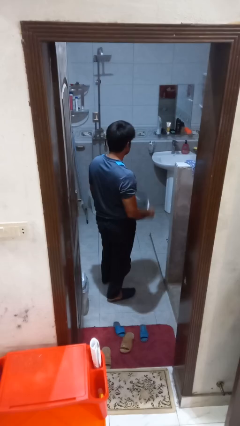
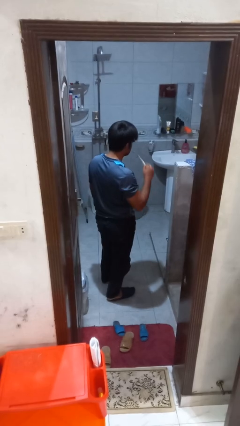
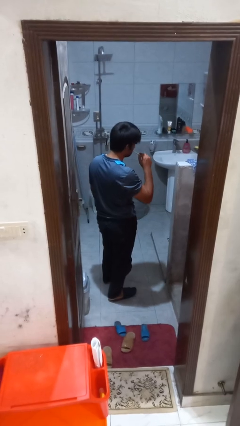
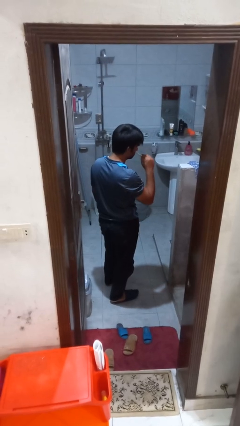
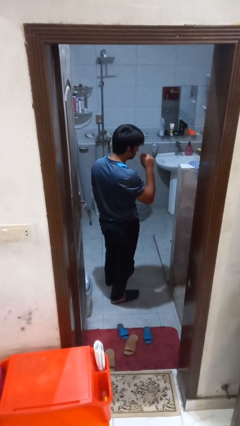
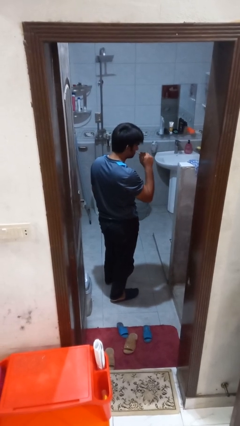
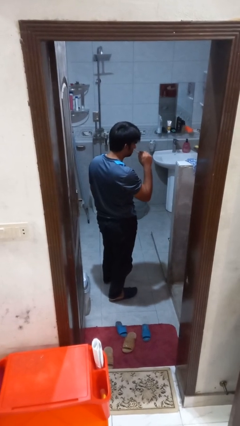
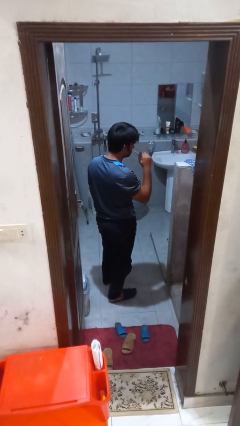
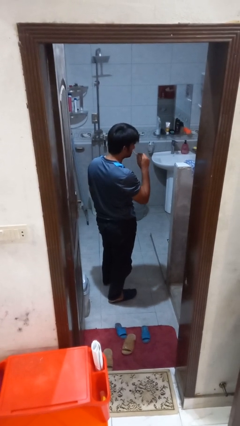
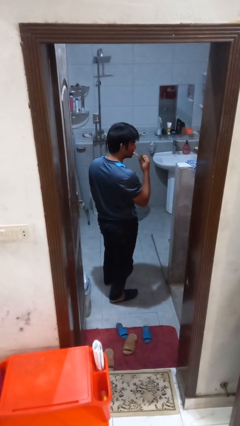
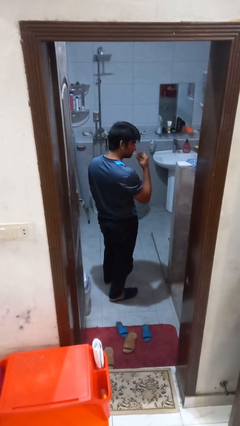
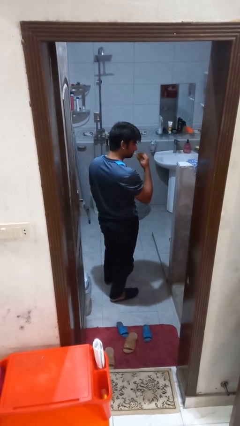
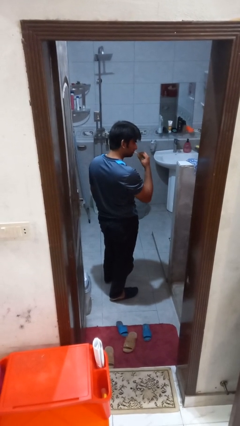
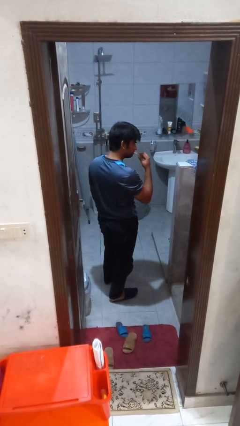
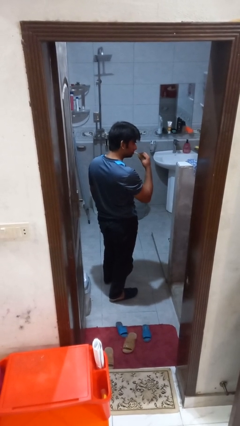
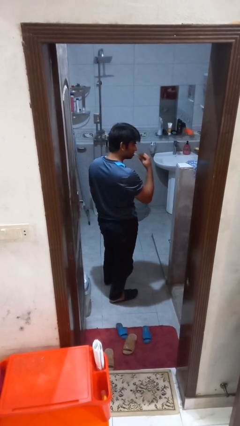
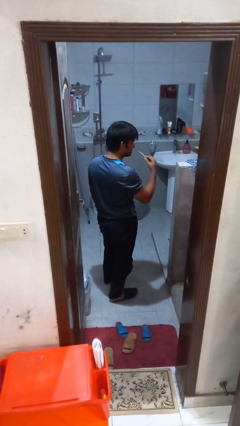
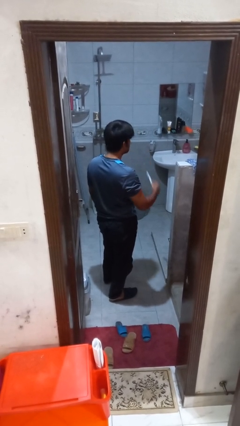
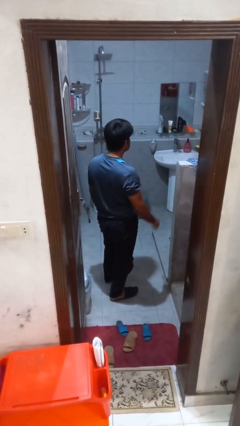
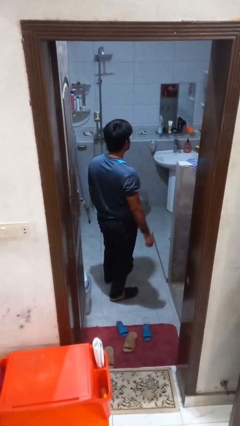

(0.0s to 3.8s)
person brushes teeth

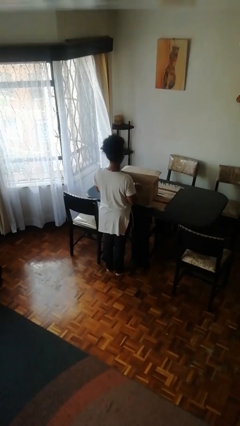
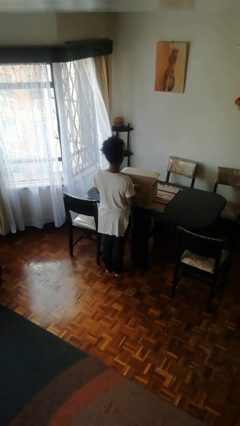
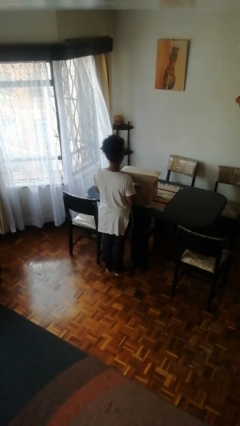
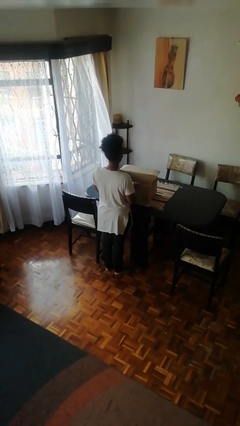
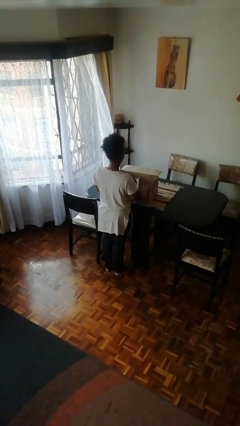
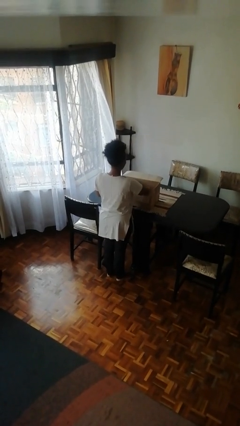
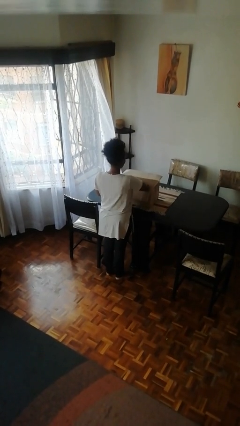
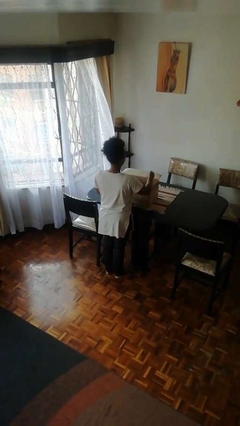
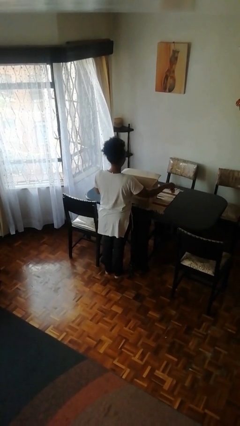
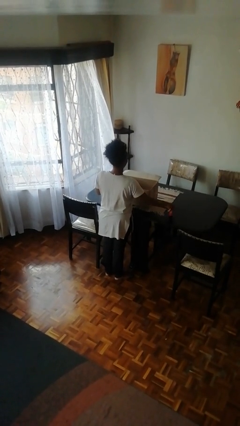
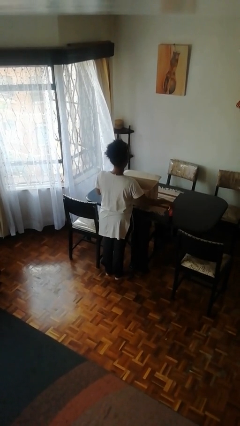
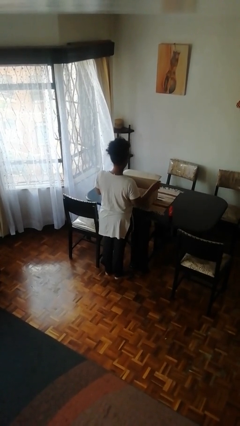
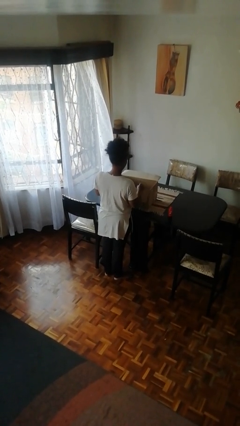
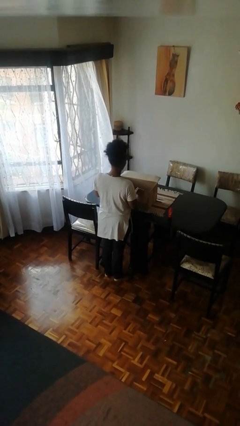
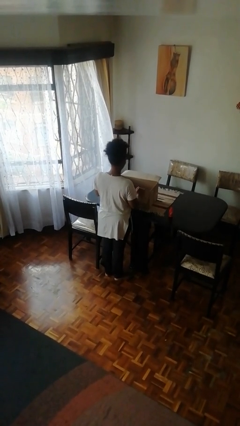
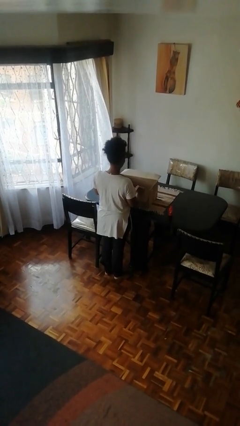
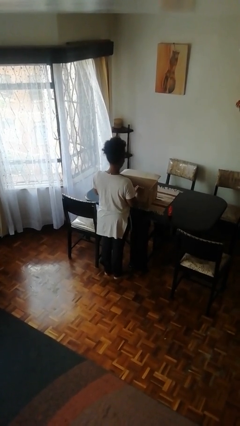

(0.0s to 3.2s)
person takes object from box

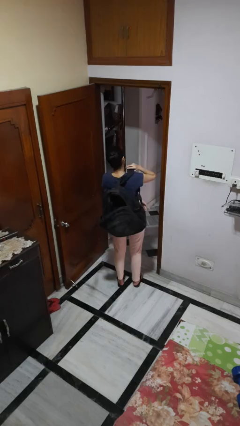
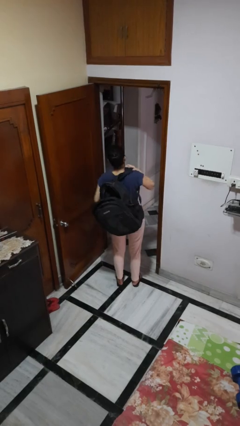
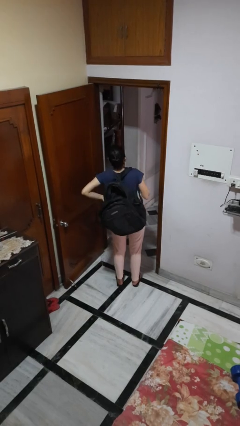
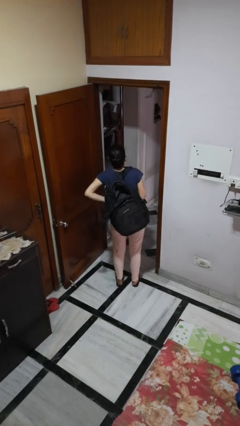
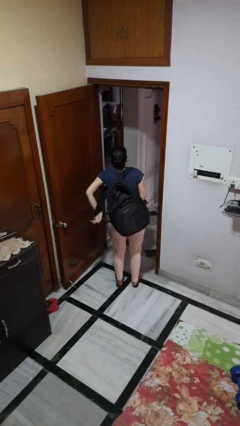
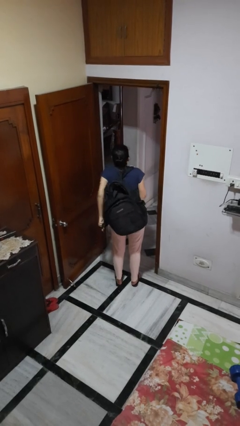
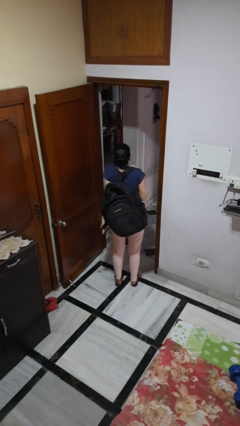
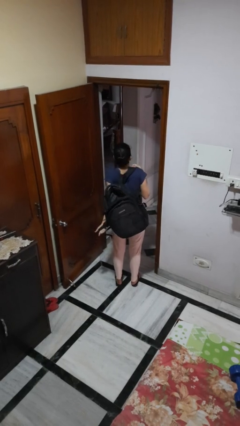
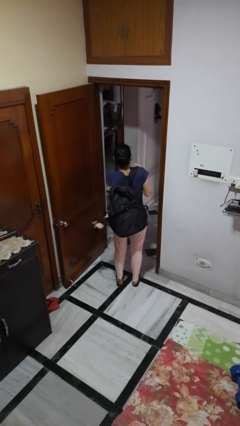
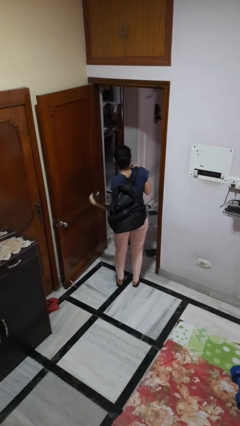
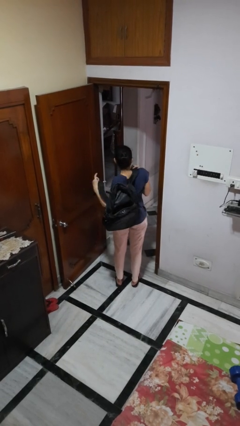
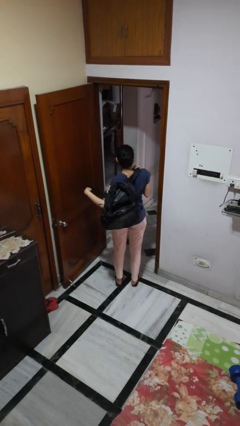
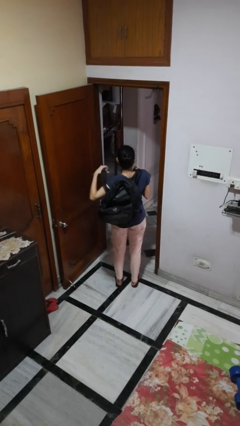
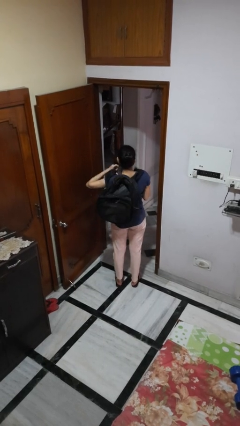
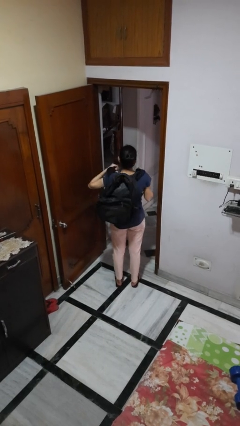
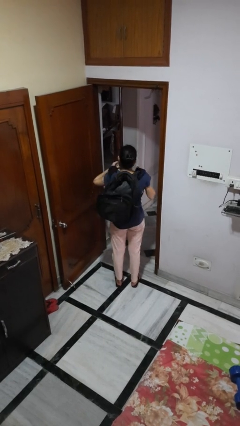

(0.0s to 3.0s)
person puts on backpack

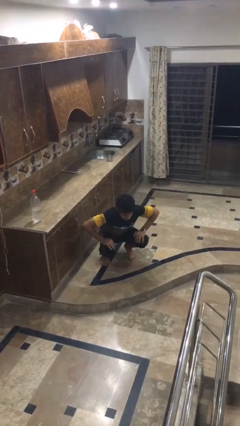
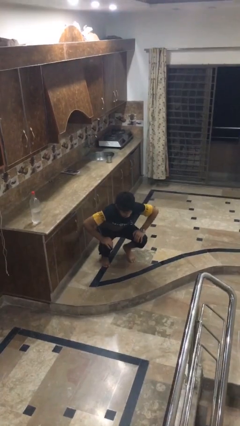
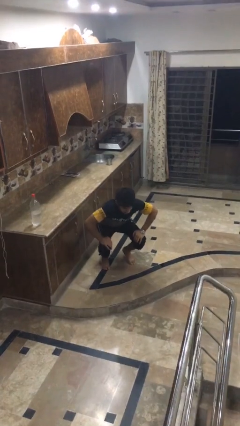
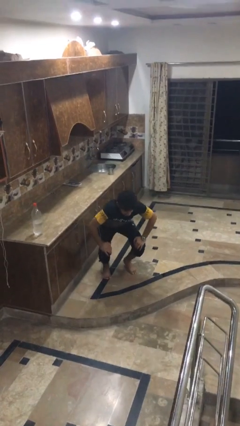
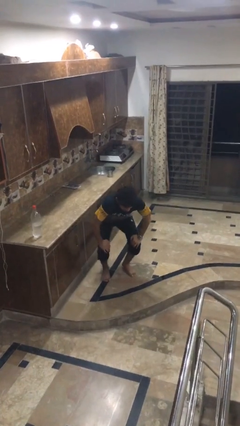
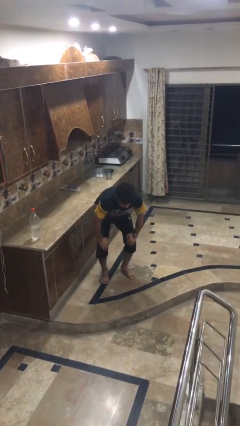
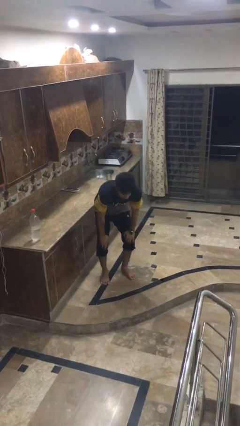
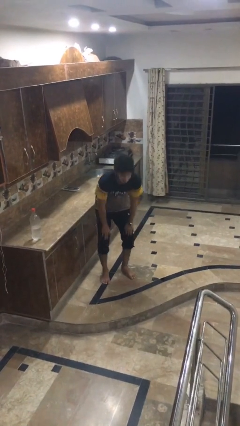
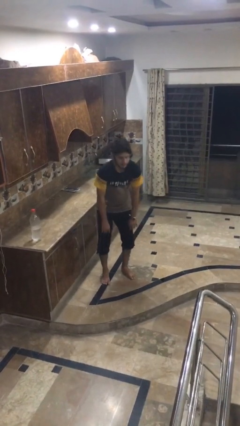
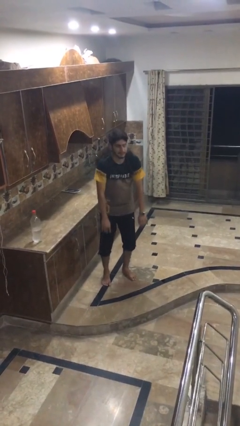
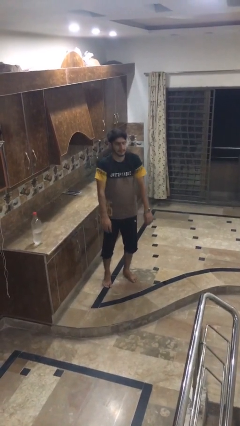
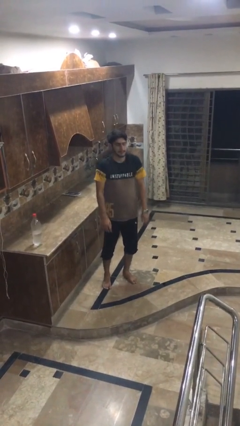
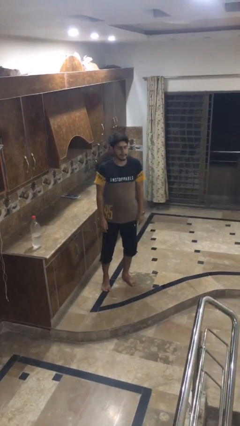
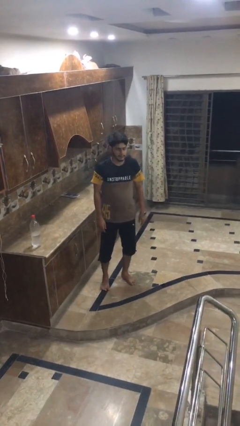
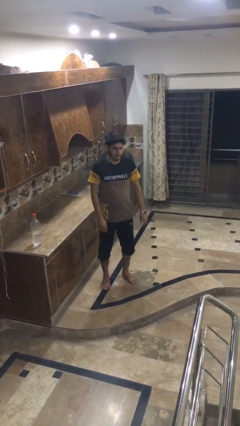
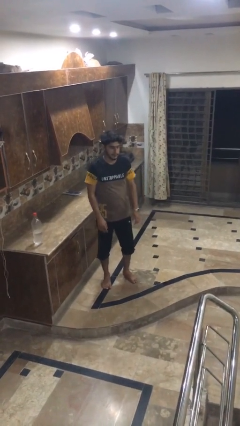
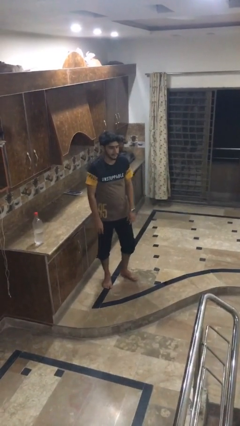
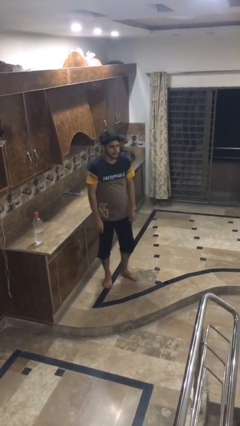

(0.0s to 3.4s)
person stands up

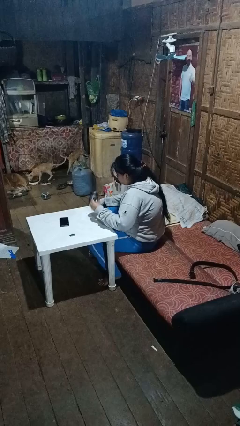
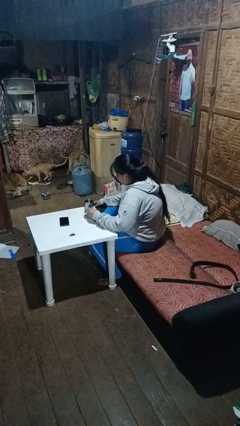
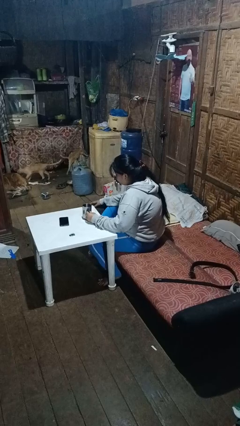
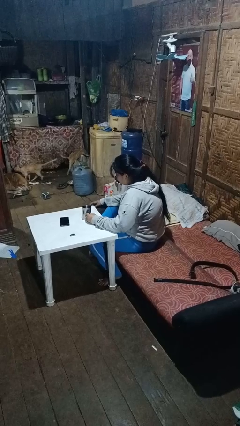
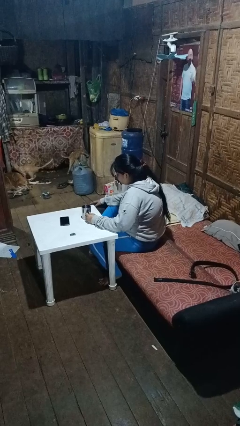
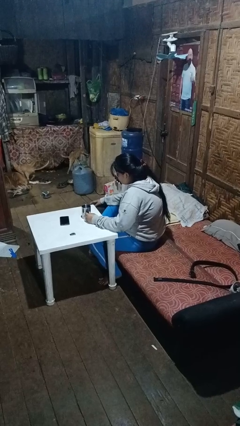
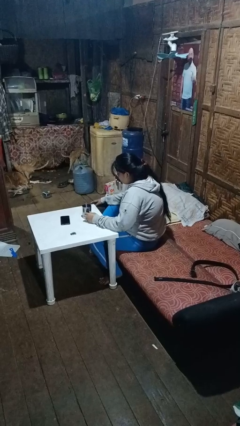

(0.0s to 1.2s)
person puts down object on table

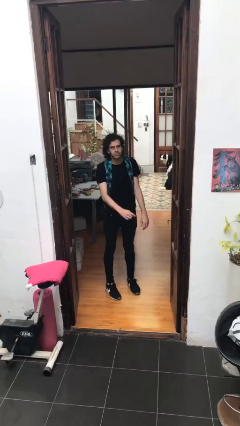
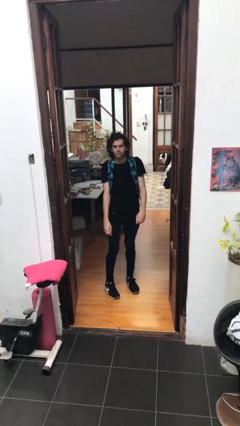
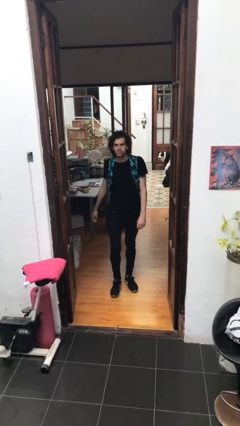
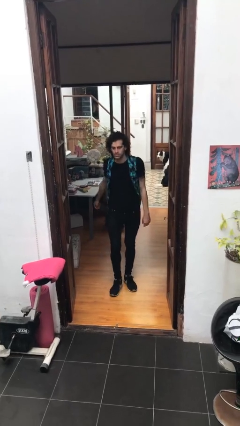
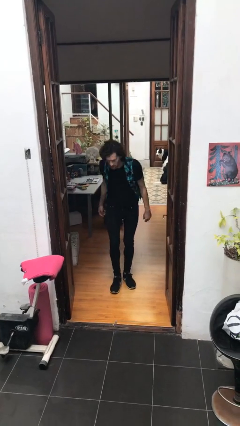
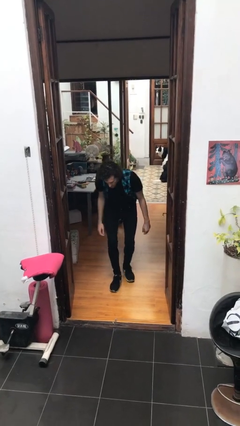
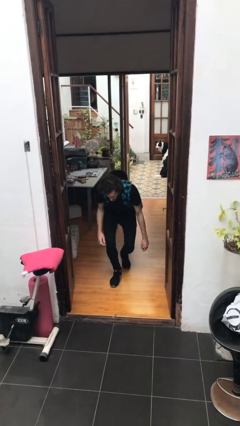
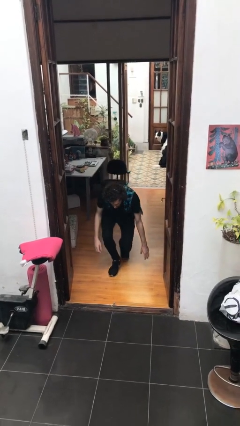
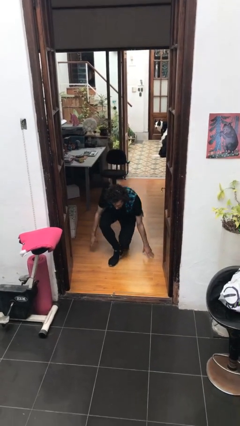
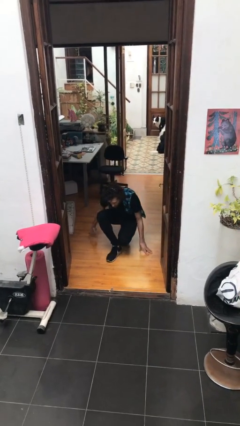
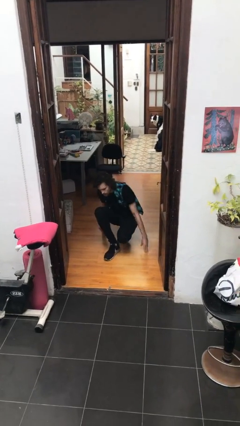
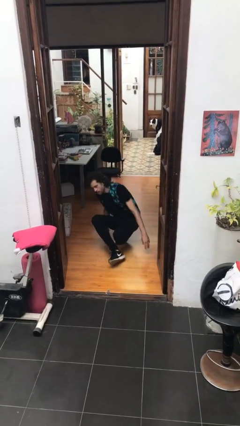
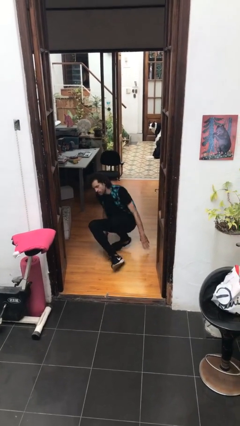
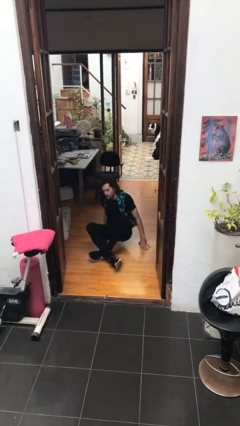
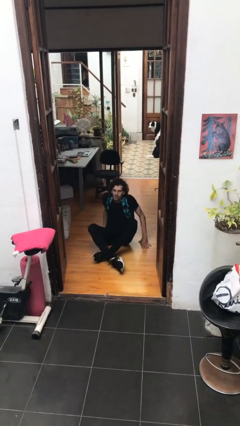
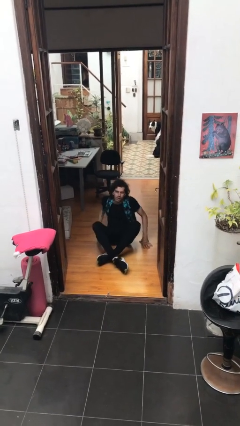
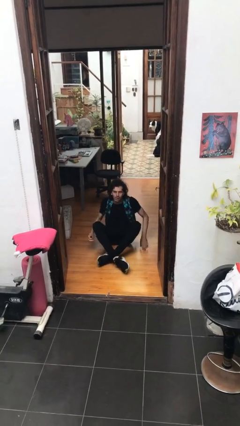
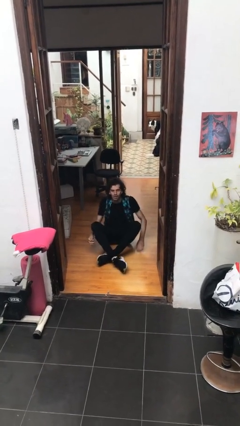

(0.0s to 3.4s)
person sits down
